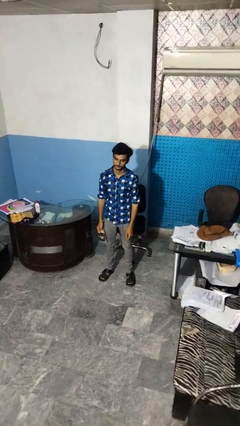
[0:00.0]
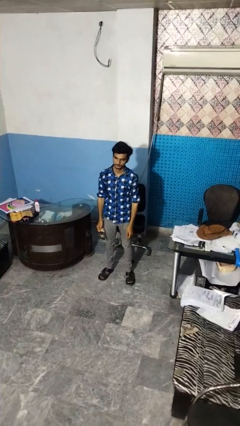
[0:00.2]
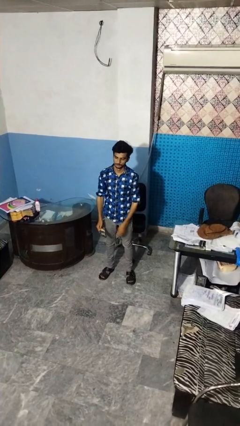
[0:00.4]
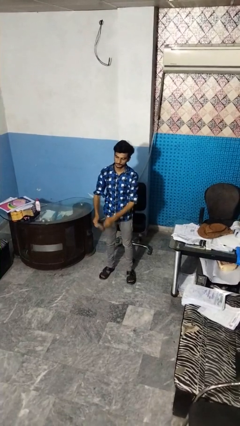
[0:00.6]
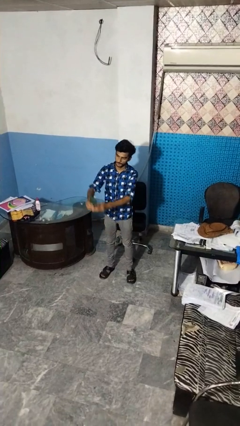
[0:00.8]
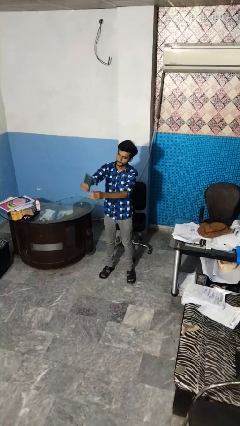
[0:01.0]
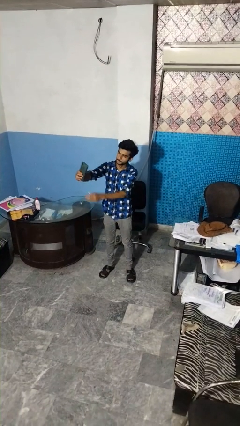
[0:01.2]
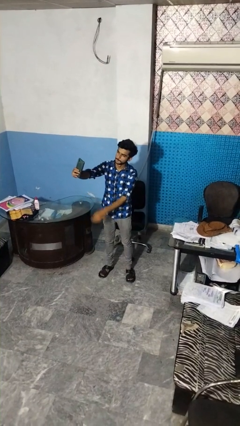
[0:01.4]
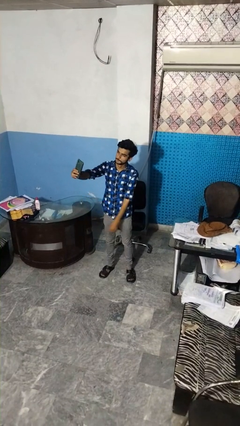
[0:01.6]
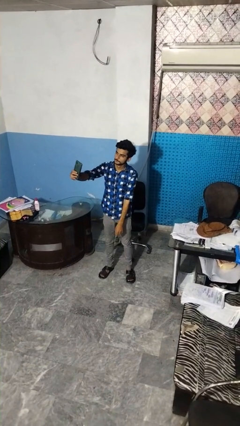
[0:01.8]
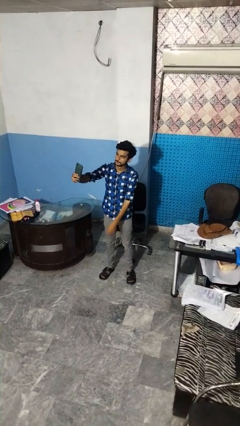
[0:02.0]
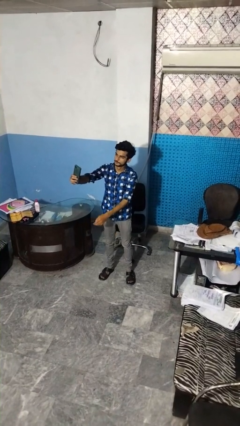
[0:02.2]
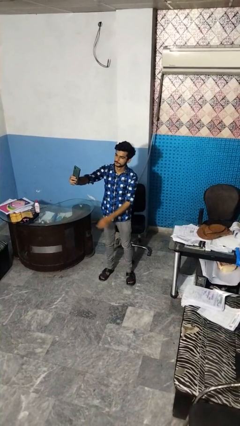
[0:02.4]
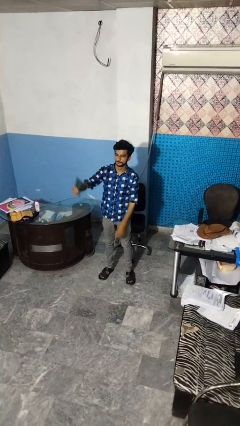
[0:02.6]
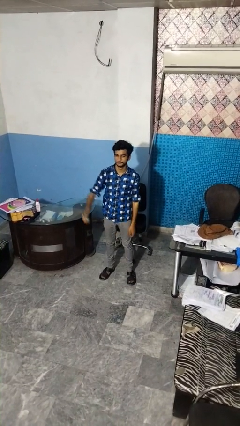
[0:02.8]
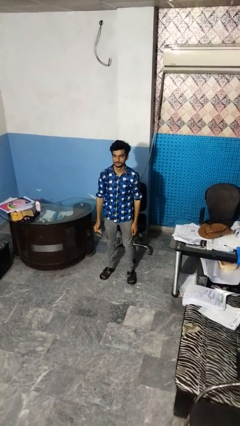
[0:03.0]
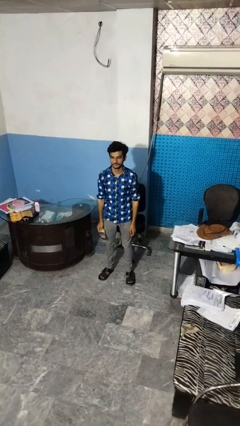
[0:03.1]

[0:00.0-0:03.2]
person takes selfie

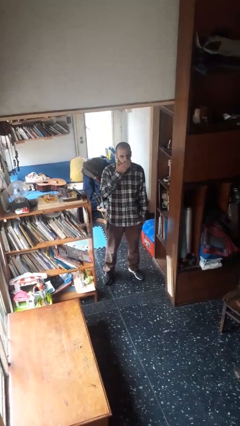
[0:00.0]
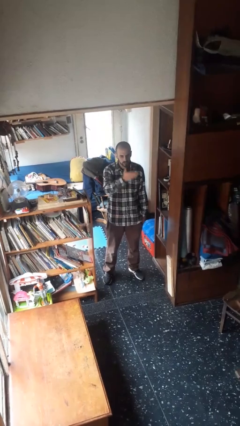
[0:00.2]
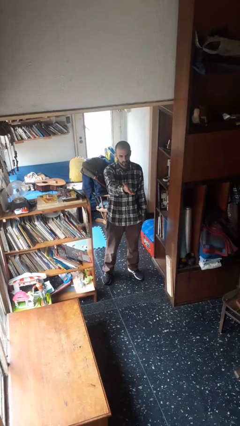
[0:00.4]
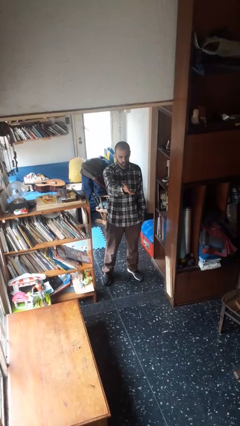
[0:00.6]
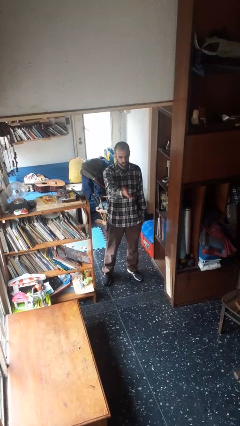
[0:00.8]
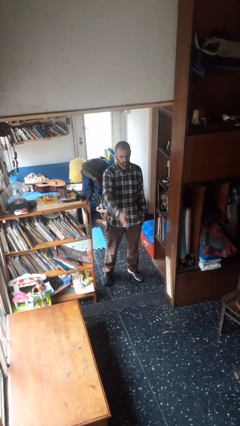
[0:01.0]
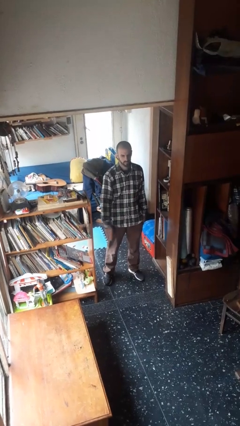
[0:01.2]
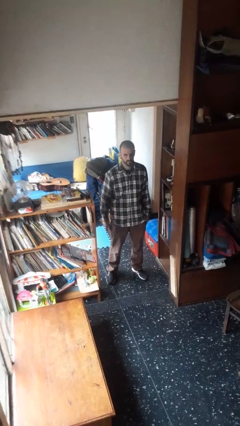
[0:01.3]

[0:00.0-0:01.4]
person gestures blow kiss

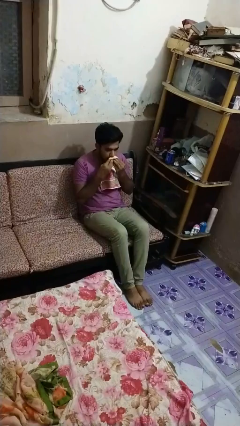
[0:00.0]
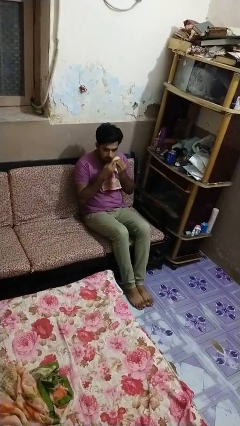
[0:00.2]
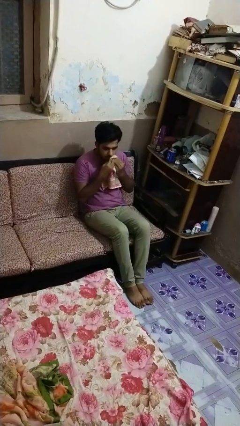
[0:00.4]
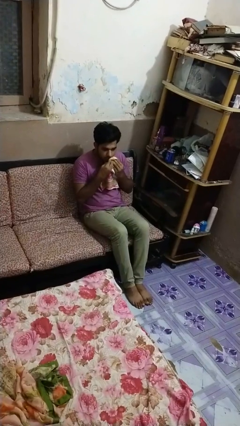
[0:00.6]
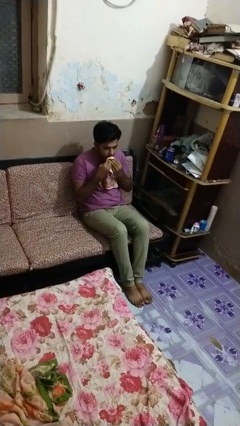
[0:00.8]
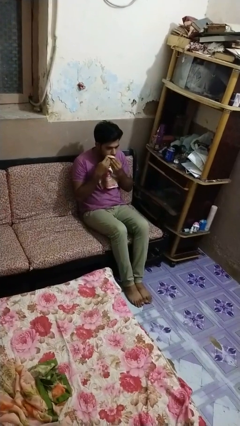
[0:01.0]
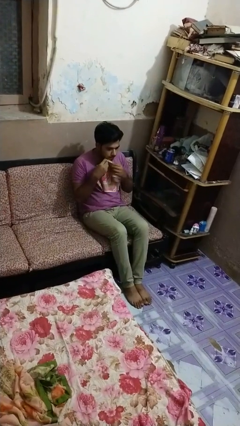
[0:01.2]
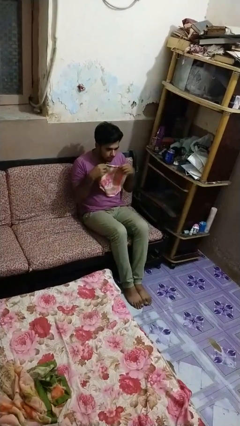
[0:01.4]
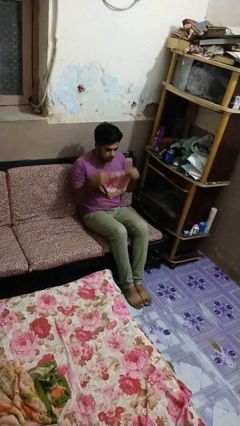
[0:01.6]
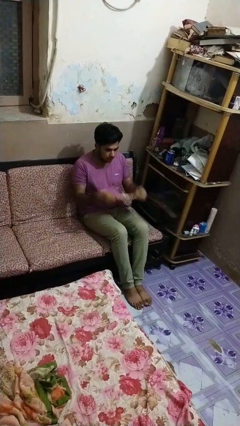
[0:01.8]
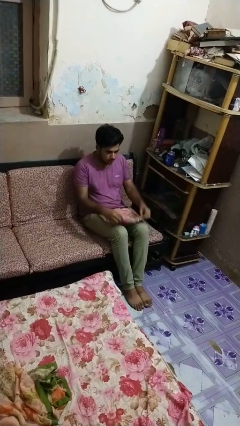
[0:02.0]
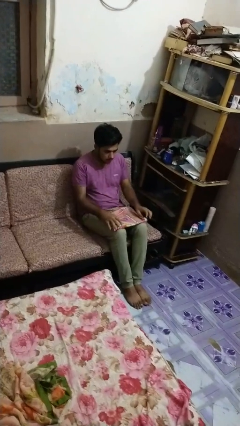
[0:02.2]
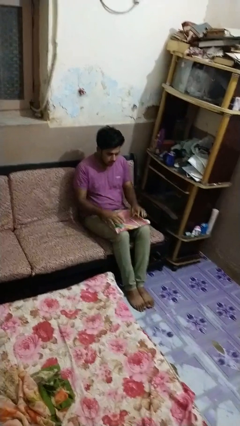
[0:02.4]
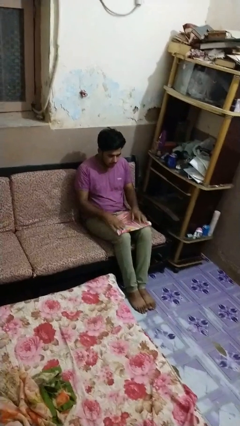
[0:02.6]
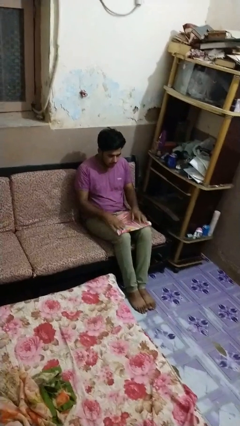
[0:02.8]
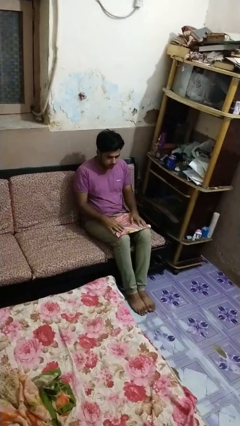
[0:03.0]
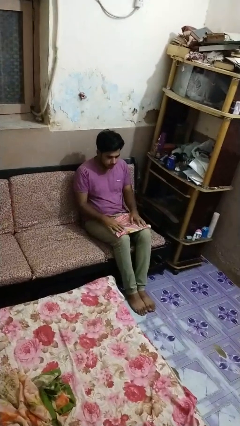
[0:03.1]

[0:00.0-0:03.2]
person wipes mouth with napkin

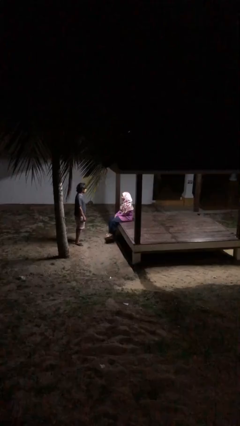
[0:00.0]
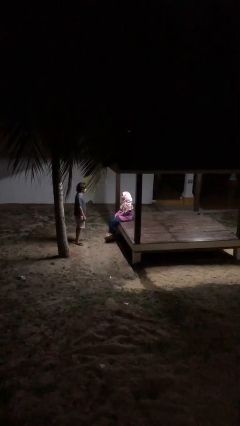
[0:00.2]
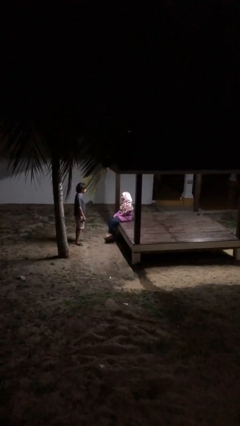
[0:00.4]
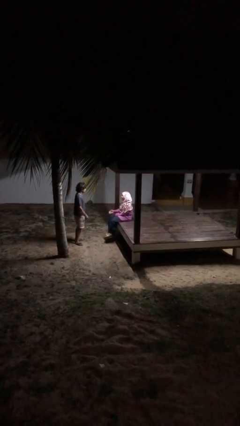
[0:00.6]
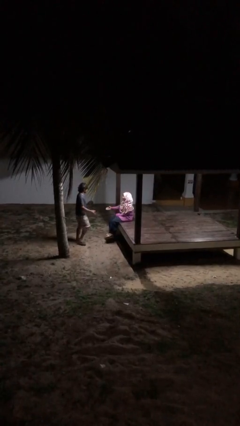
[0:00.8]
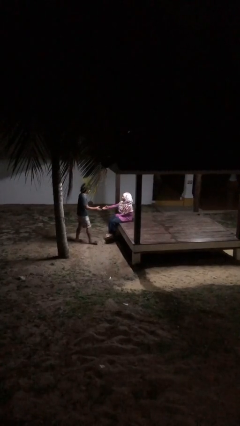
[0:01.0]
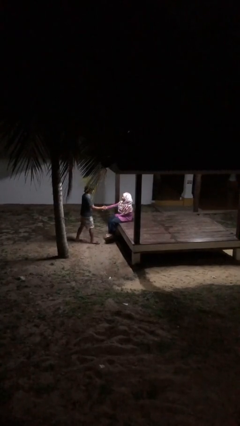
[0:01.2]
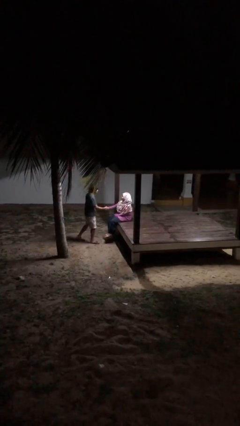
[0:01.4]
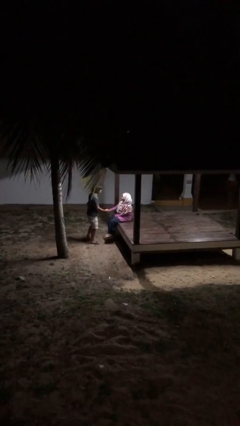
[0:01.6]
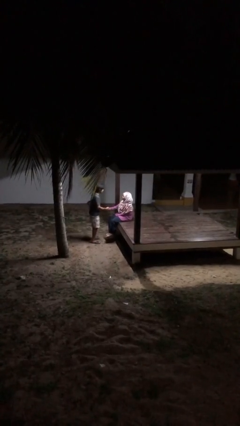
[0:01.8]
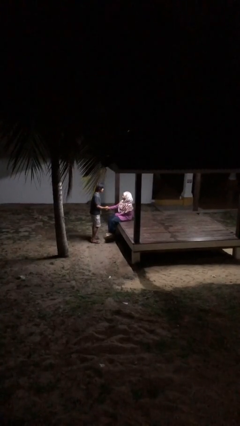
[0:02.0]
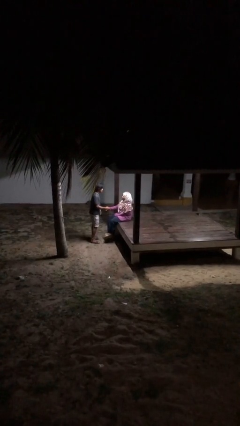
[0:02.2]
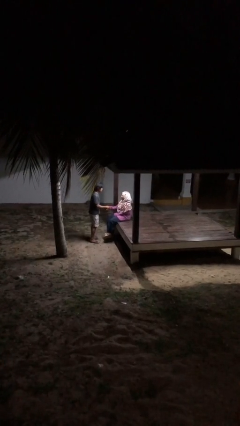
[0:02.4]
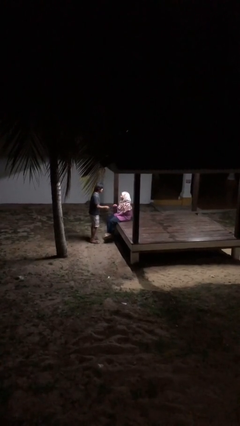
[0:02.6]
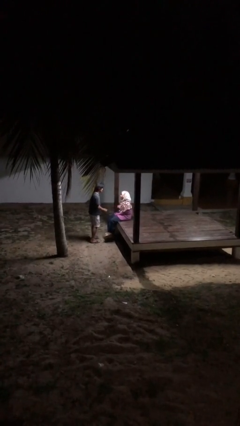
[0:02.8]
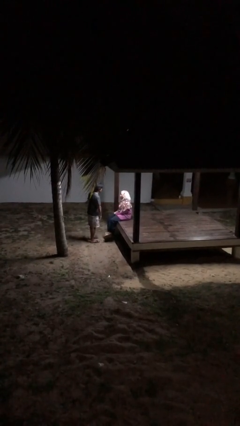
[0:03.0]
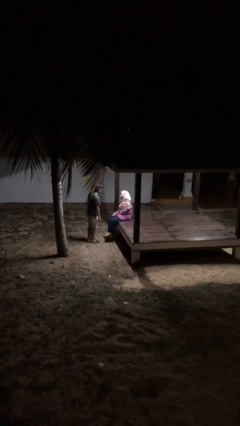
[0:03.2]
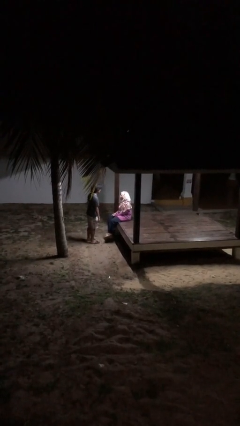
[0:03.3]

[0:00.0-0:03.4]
person shakes hand

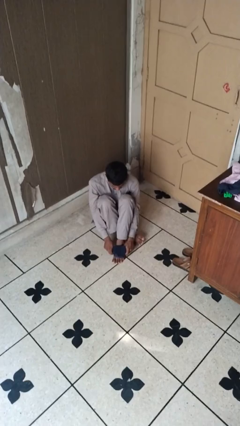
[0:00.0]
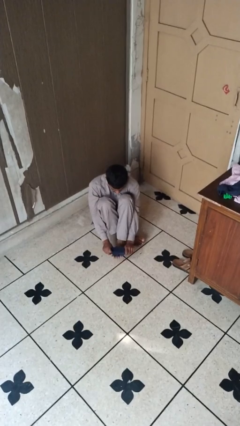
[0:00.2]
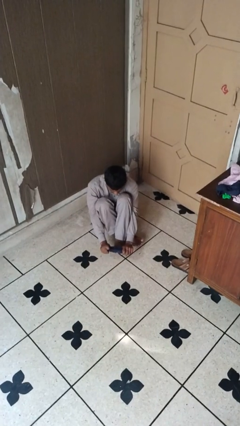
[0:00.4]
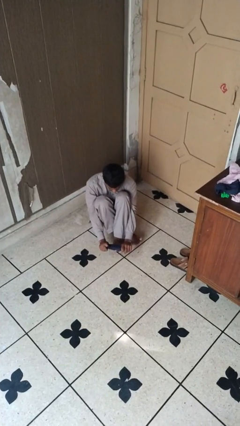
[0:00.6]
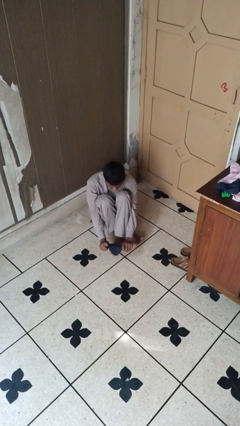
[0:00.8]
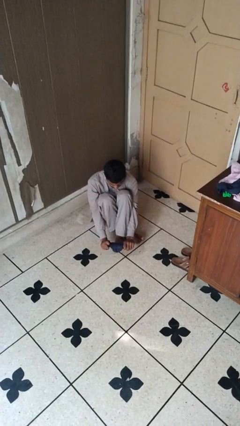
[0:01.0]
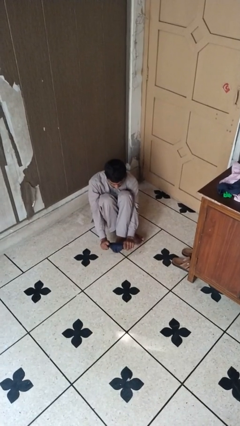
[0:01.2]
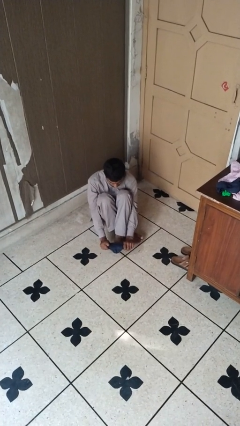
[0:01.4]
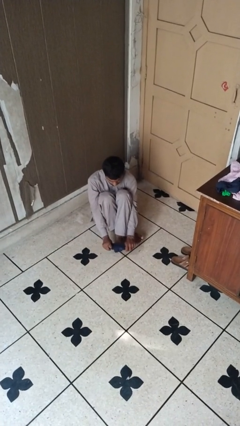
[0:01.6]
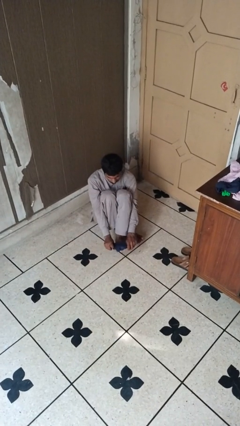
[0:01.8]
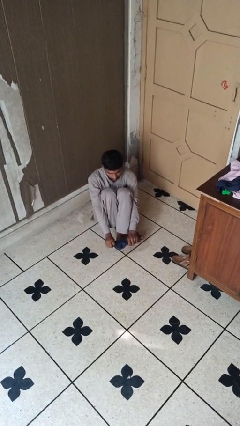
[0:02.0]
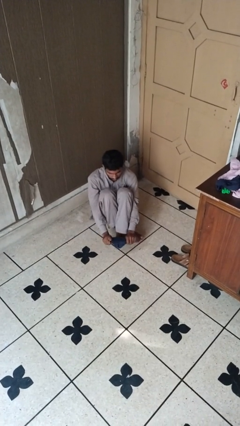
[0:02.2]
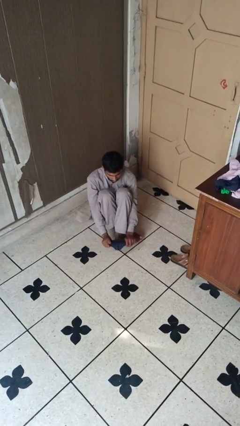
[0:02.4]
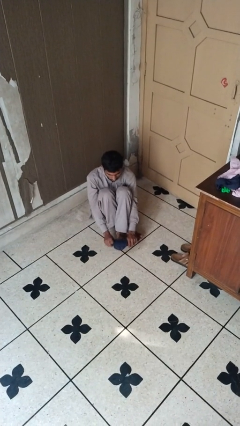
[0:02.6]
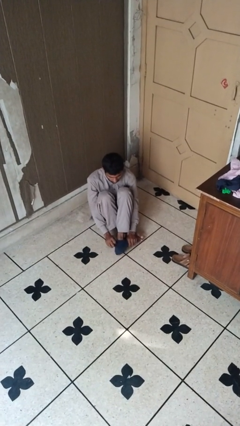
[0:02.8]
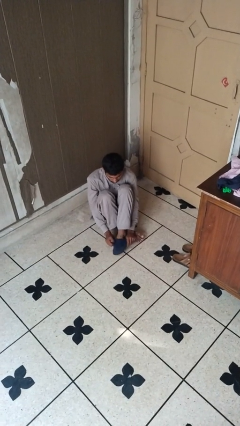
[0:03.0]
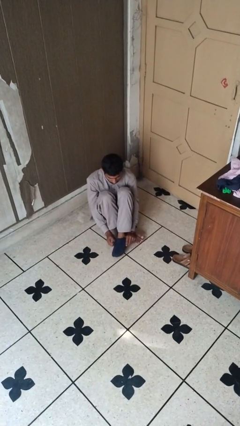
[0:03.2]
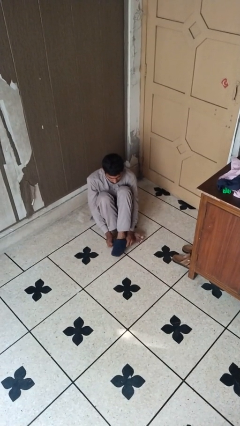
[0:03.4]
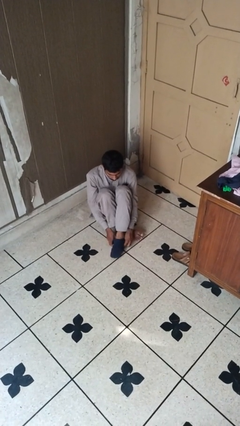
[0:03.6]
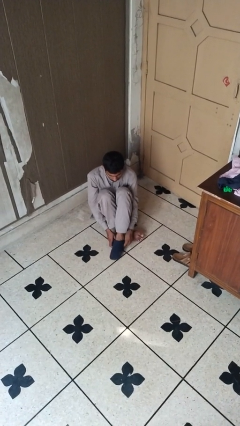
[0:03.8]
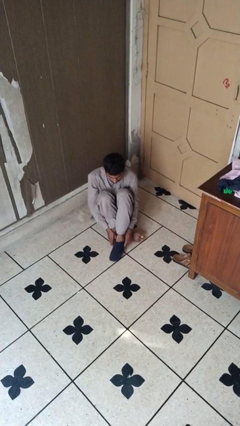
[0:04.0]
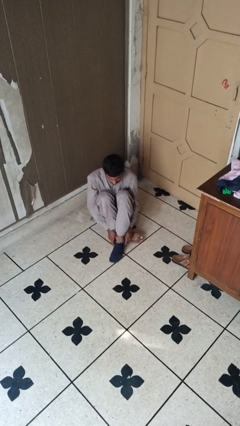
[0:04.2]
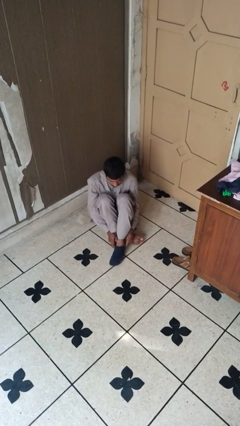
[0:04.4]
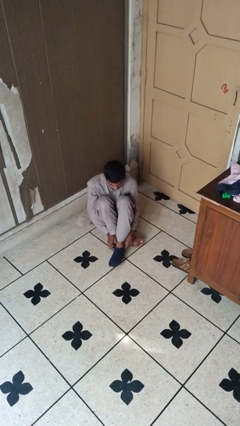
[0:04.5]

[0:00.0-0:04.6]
person puts on socks

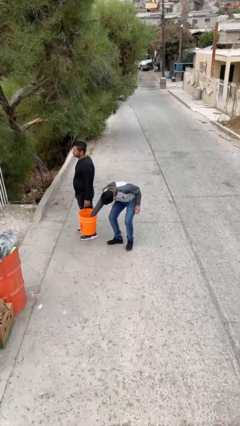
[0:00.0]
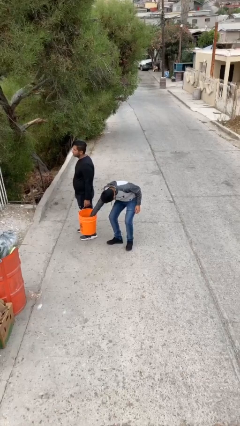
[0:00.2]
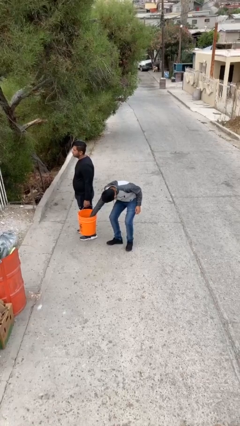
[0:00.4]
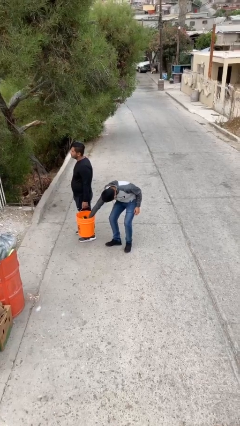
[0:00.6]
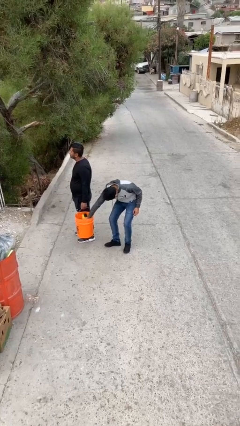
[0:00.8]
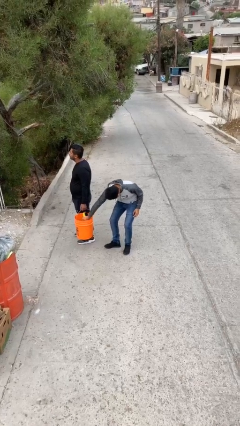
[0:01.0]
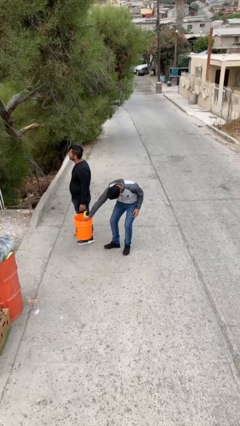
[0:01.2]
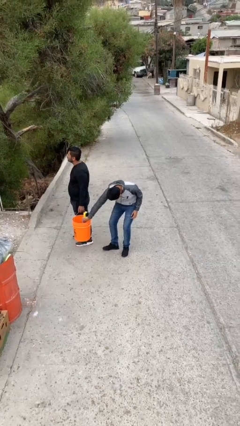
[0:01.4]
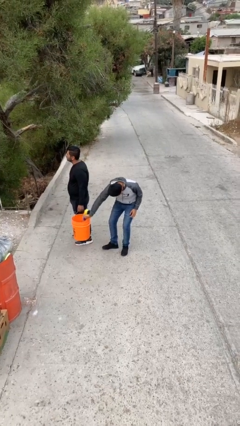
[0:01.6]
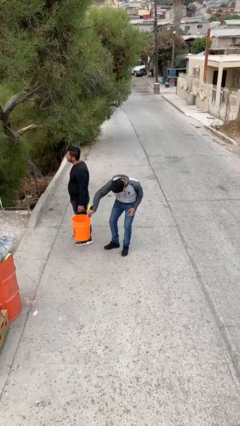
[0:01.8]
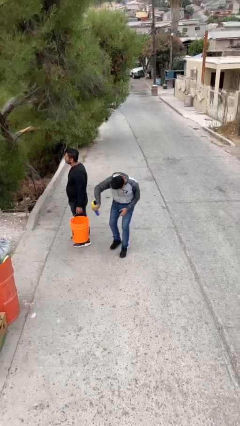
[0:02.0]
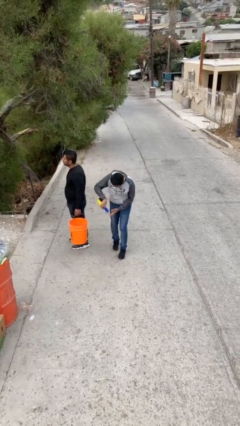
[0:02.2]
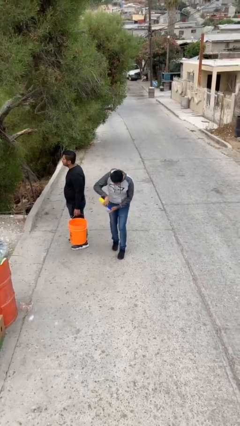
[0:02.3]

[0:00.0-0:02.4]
person steals object from person
